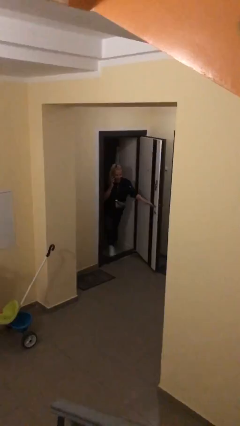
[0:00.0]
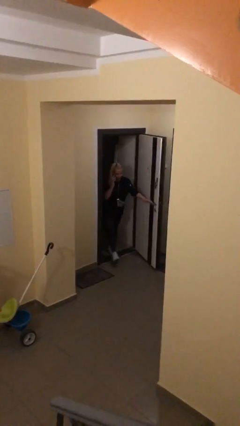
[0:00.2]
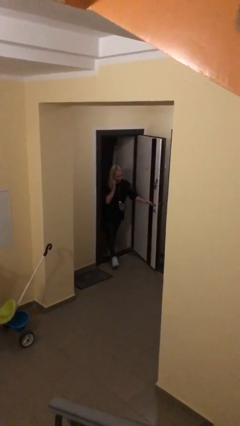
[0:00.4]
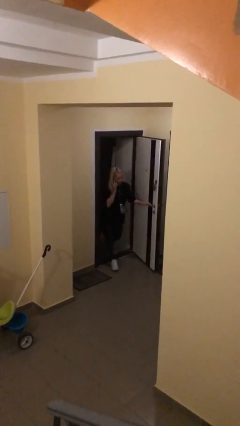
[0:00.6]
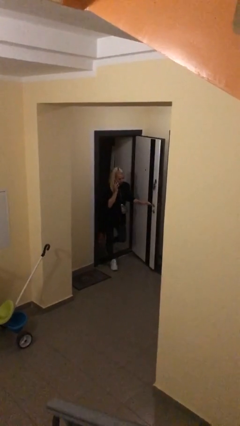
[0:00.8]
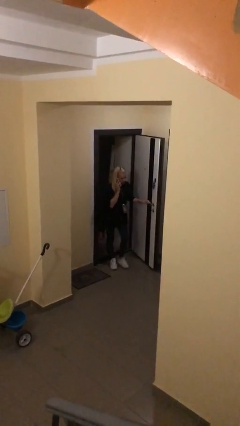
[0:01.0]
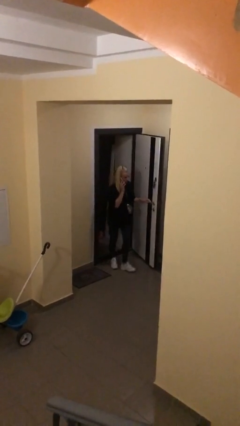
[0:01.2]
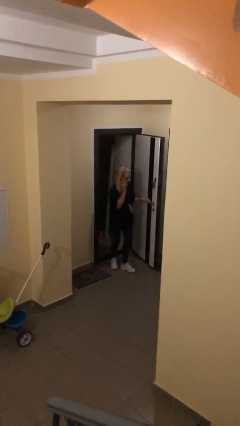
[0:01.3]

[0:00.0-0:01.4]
person enters scene through structure

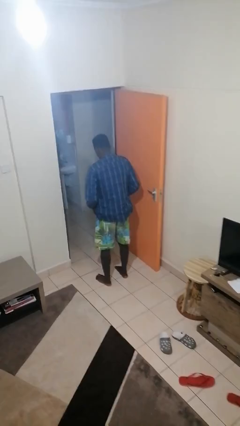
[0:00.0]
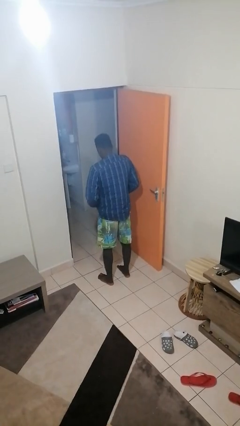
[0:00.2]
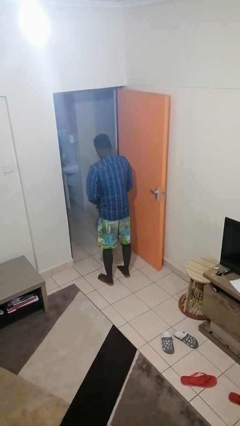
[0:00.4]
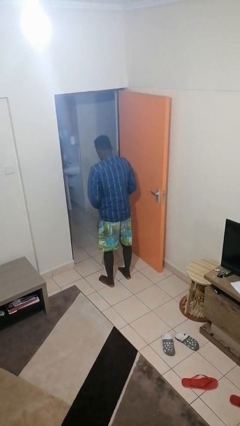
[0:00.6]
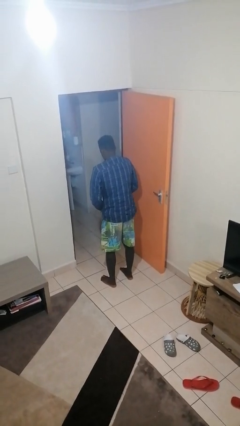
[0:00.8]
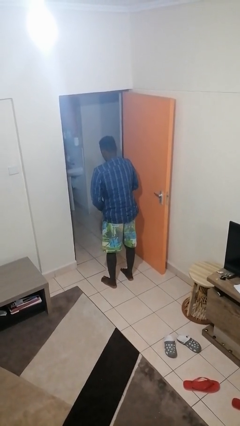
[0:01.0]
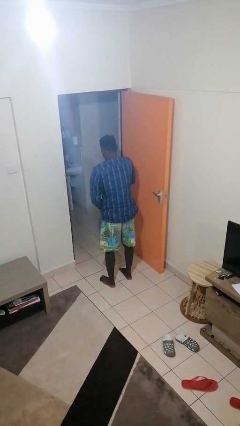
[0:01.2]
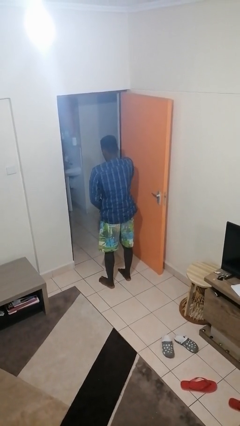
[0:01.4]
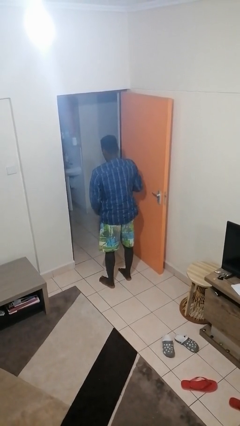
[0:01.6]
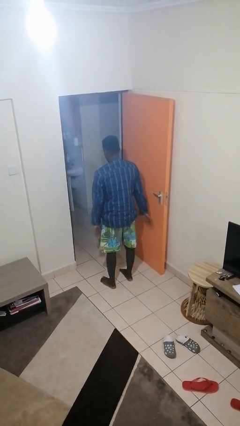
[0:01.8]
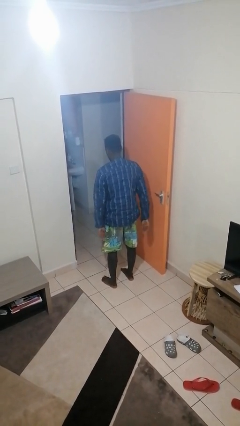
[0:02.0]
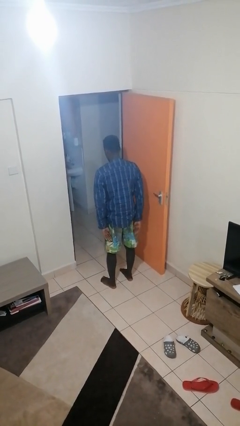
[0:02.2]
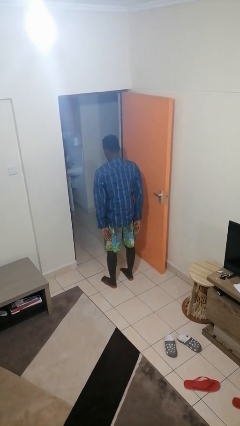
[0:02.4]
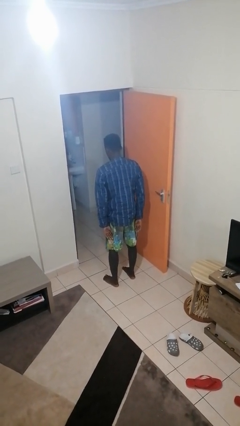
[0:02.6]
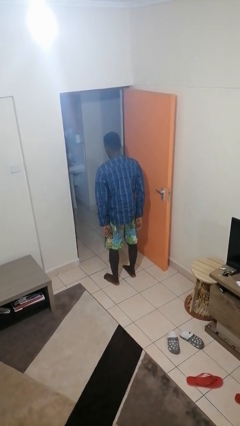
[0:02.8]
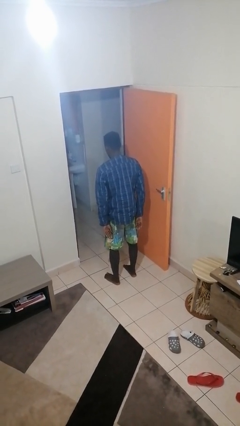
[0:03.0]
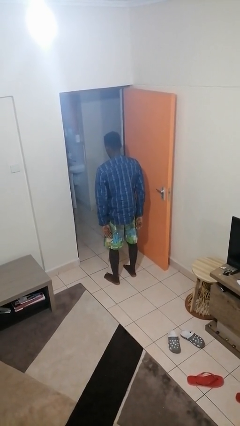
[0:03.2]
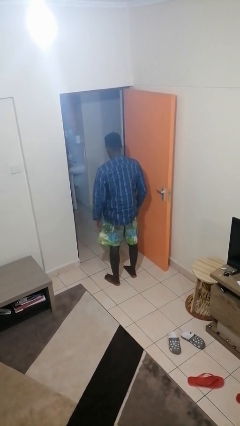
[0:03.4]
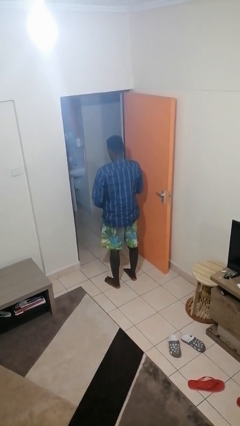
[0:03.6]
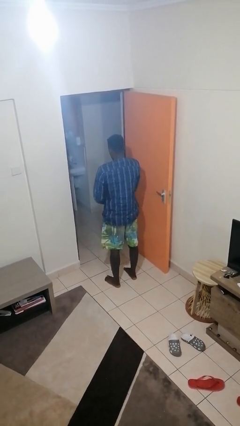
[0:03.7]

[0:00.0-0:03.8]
person zips up jacket

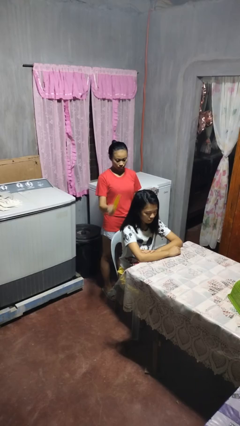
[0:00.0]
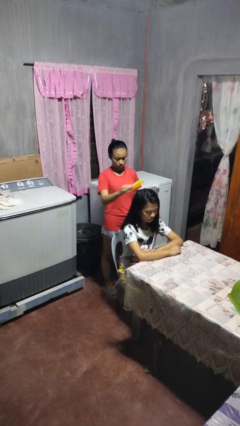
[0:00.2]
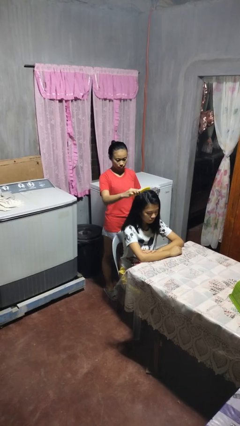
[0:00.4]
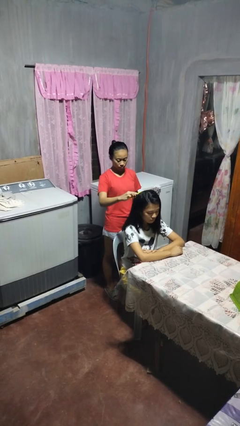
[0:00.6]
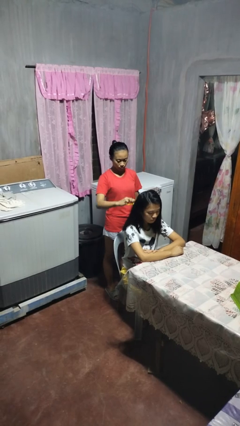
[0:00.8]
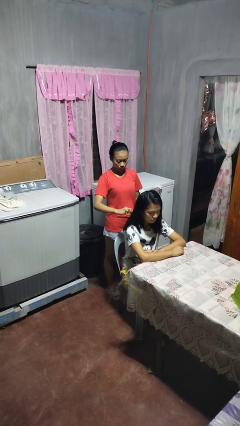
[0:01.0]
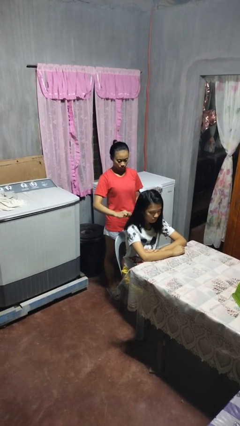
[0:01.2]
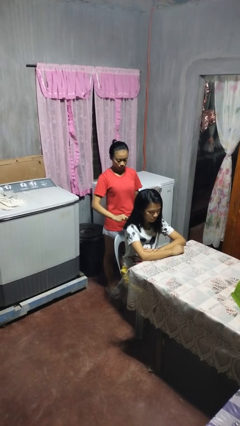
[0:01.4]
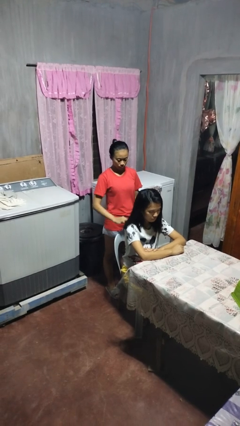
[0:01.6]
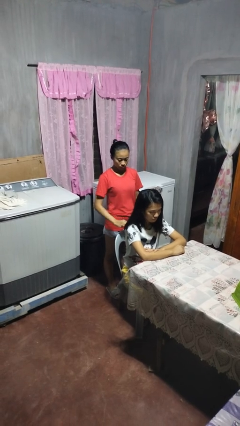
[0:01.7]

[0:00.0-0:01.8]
person brushes hair of person

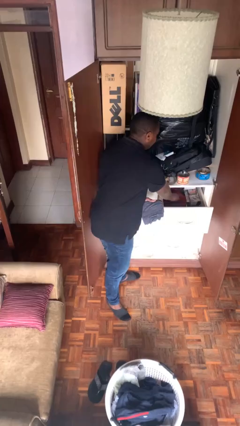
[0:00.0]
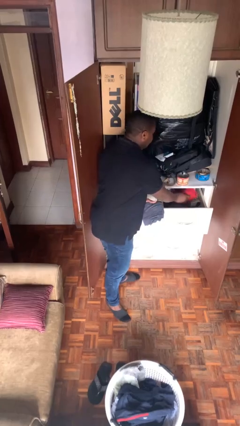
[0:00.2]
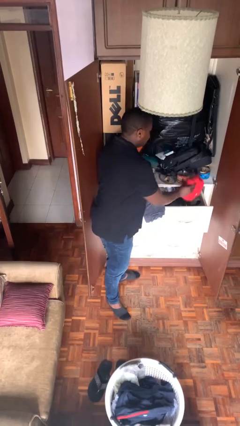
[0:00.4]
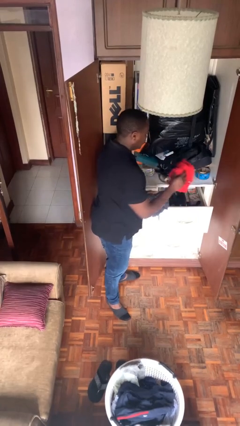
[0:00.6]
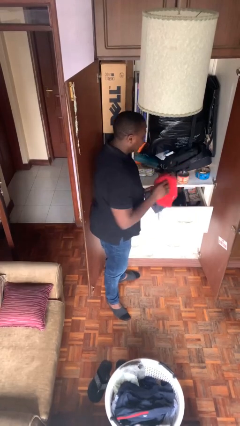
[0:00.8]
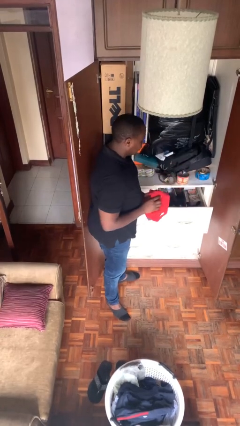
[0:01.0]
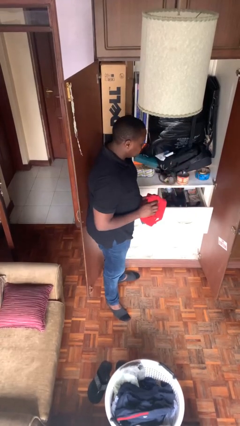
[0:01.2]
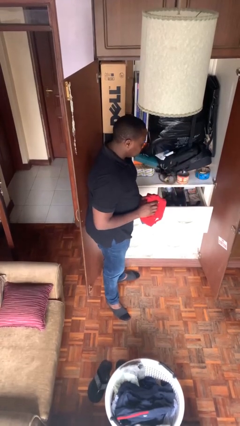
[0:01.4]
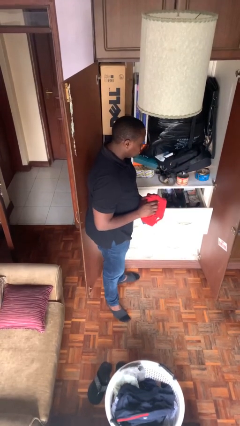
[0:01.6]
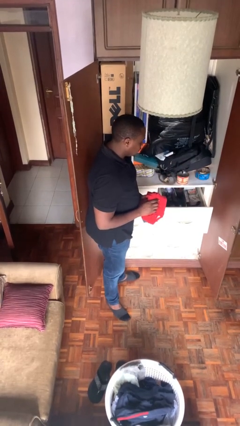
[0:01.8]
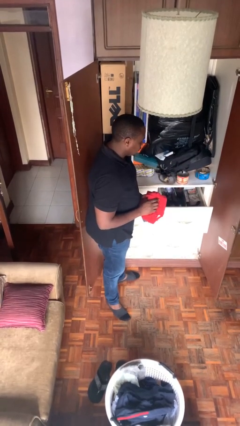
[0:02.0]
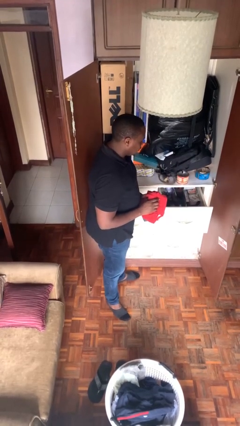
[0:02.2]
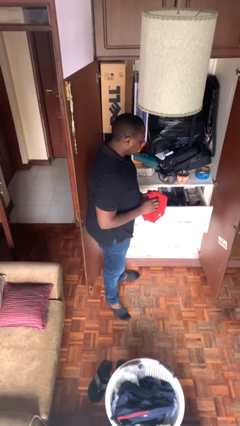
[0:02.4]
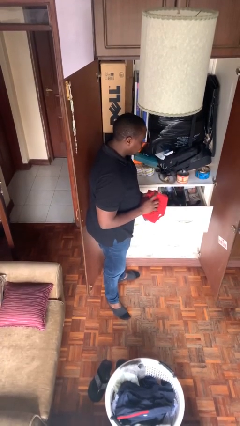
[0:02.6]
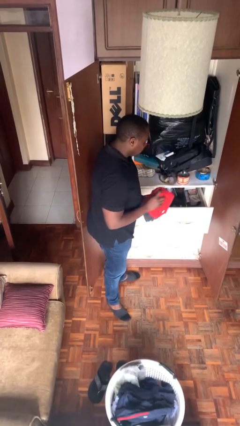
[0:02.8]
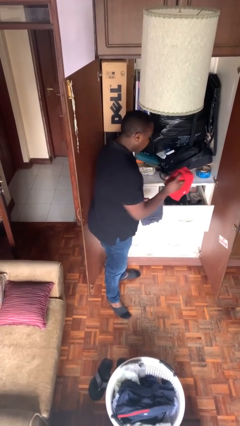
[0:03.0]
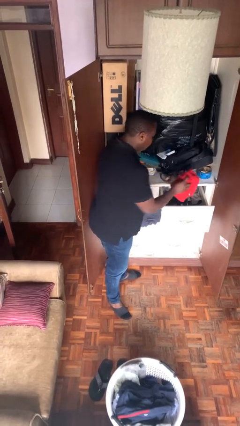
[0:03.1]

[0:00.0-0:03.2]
person takes clothes from dresser

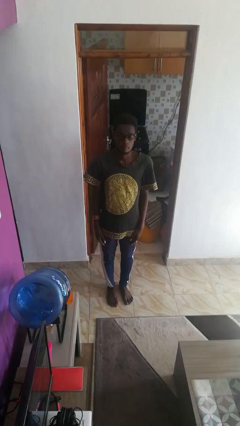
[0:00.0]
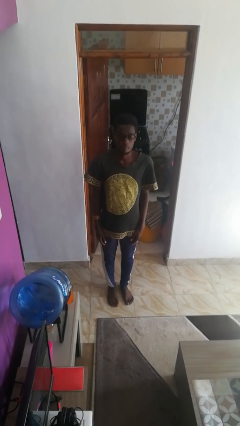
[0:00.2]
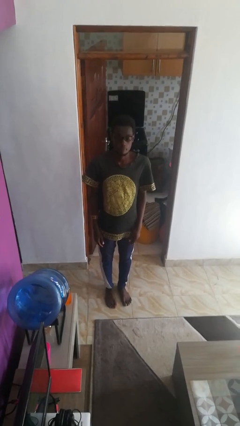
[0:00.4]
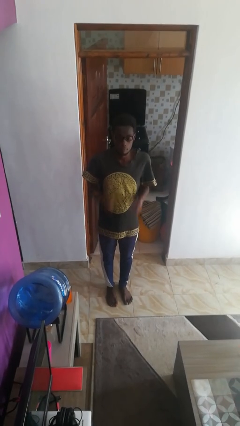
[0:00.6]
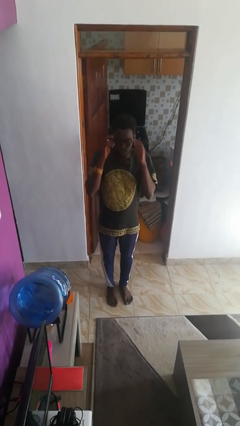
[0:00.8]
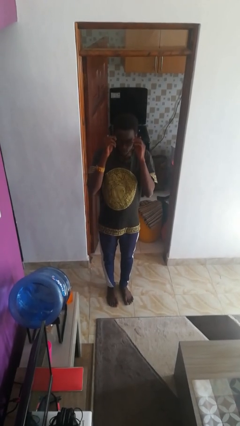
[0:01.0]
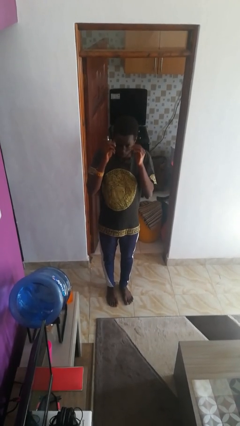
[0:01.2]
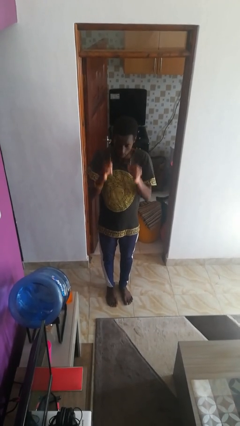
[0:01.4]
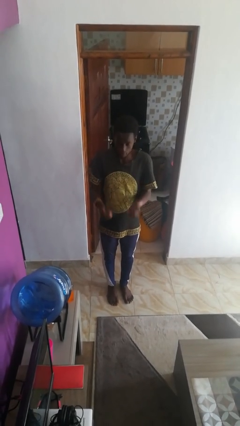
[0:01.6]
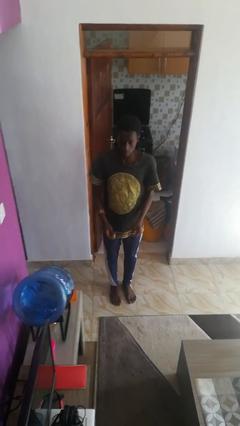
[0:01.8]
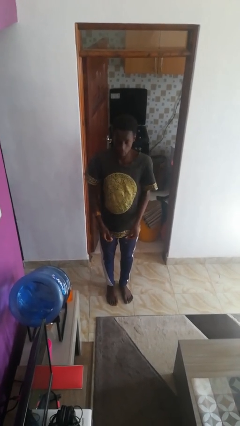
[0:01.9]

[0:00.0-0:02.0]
person takes off glasses

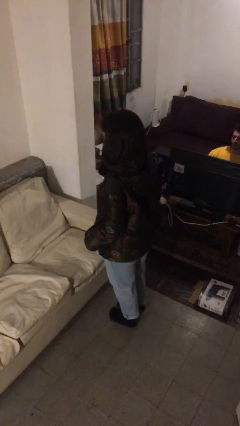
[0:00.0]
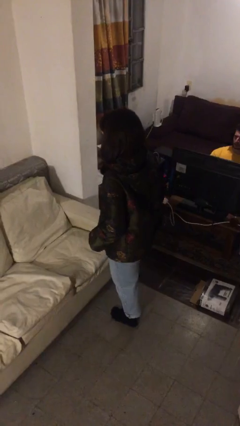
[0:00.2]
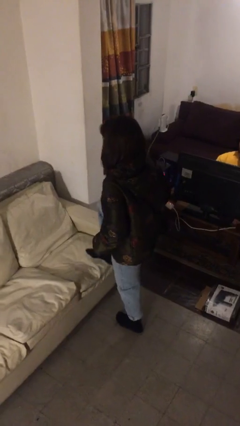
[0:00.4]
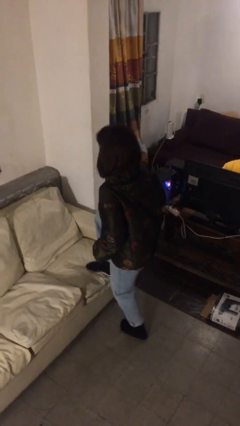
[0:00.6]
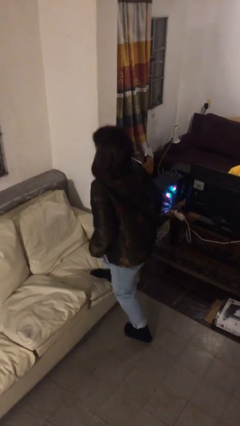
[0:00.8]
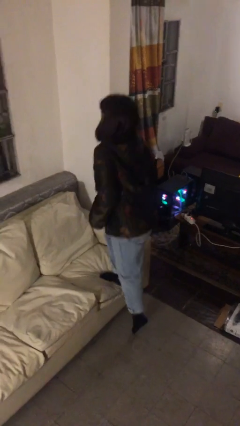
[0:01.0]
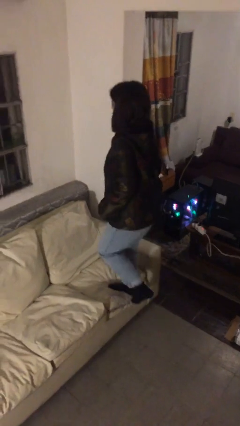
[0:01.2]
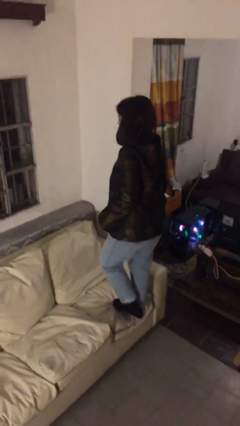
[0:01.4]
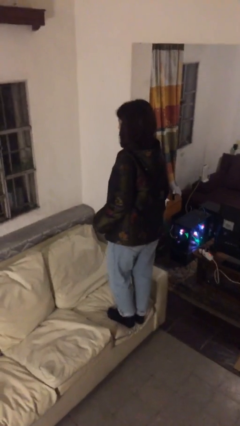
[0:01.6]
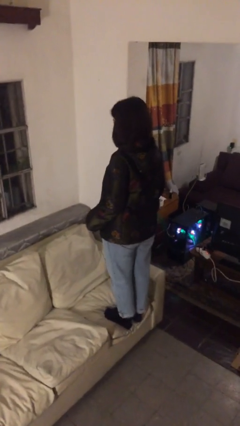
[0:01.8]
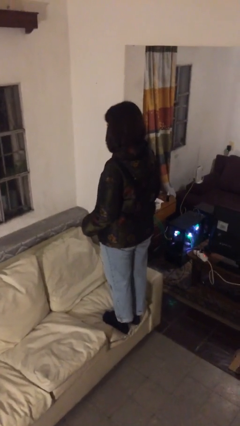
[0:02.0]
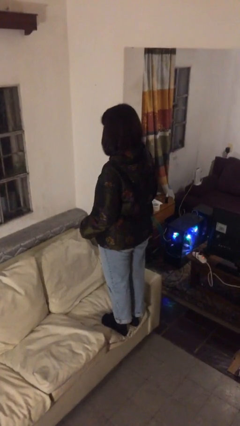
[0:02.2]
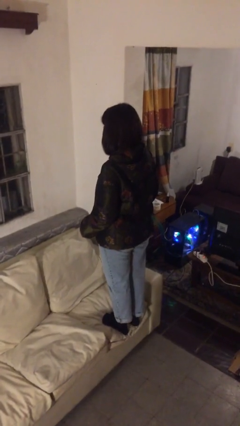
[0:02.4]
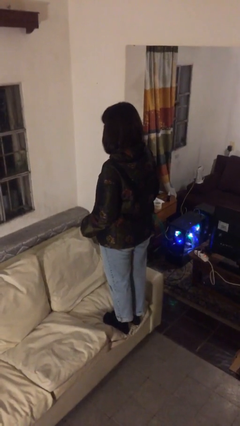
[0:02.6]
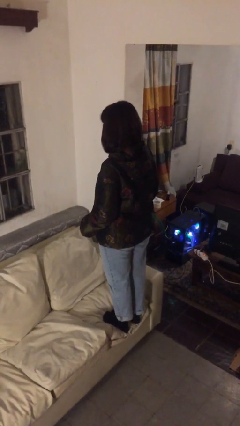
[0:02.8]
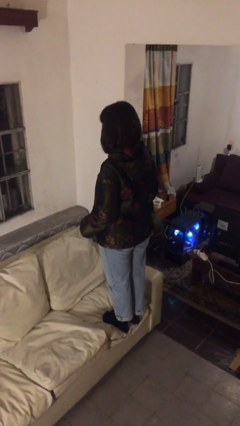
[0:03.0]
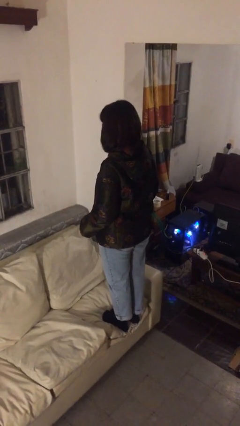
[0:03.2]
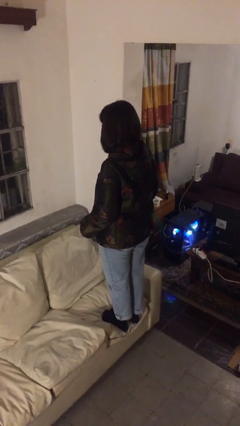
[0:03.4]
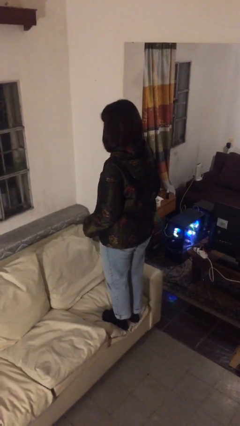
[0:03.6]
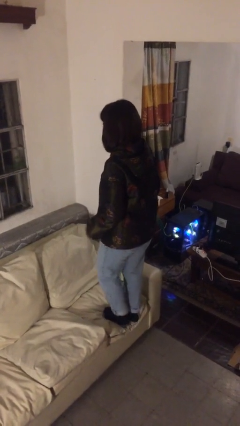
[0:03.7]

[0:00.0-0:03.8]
person climbs on couch

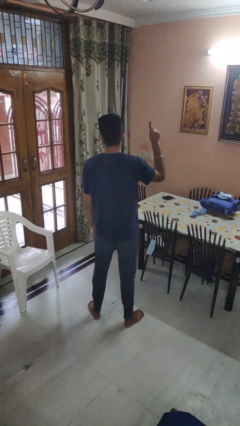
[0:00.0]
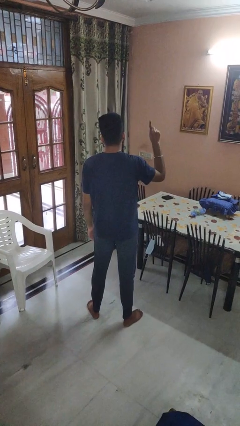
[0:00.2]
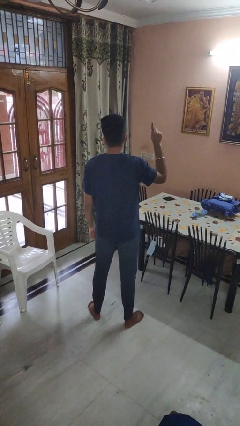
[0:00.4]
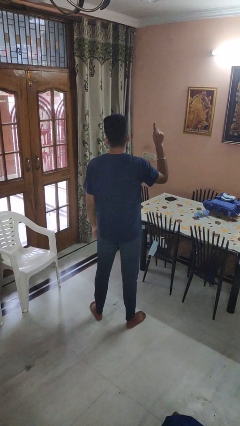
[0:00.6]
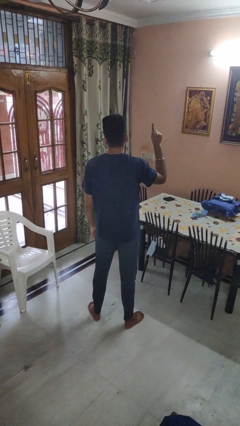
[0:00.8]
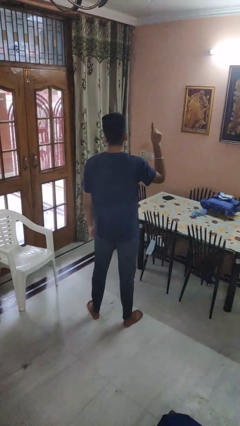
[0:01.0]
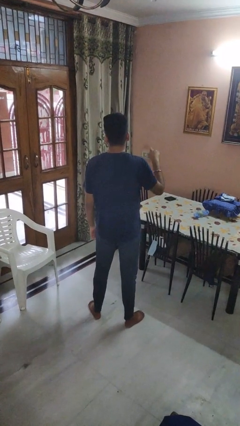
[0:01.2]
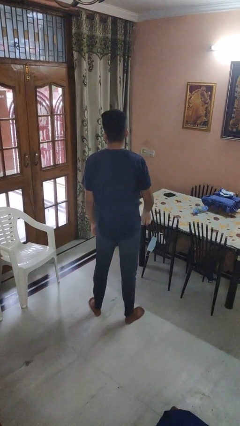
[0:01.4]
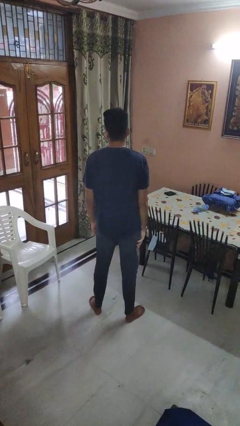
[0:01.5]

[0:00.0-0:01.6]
person gestures number one
